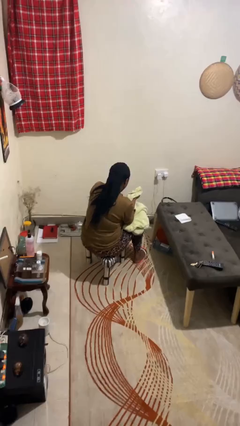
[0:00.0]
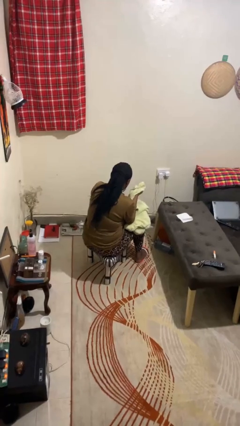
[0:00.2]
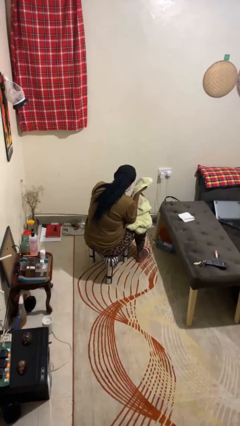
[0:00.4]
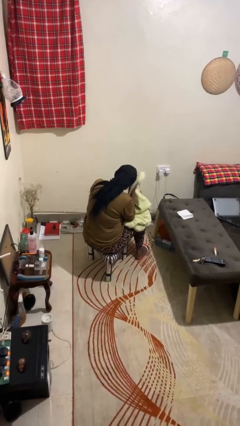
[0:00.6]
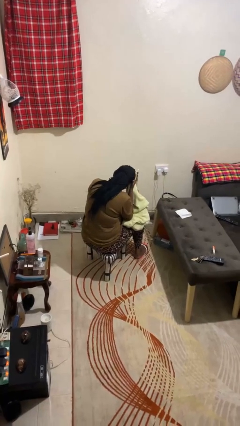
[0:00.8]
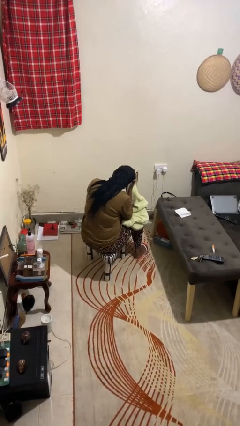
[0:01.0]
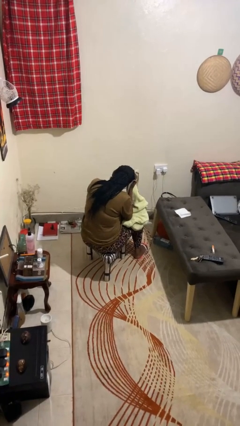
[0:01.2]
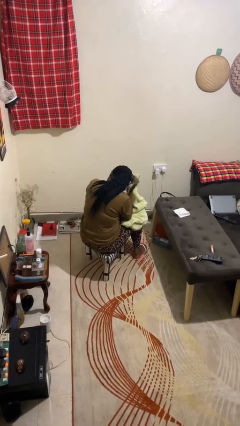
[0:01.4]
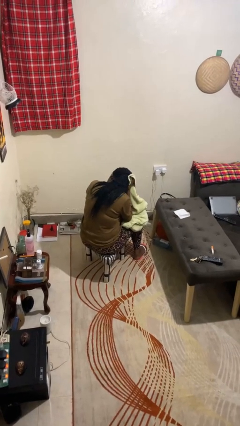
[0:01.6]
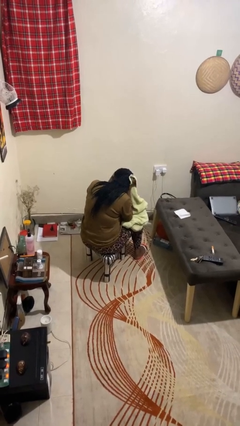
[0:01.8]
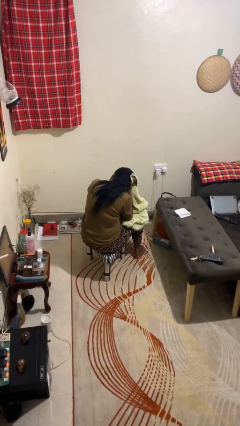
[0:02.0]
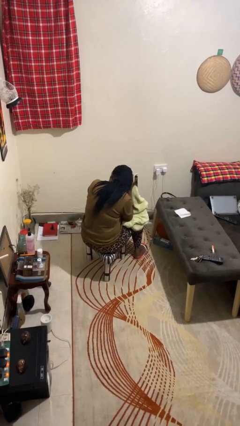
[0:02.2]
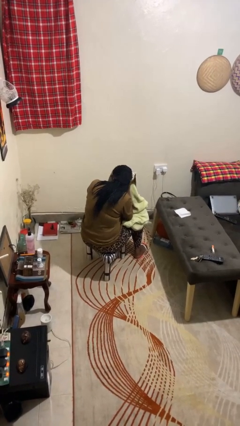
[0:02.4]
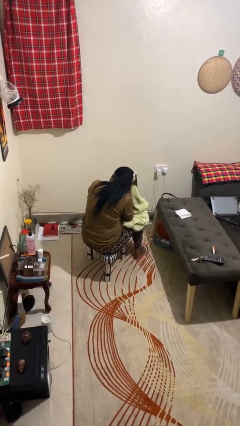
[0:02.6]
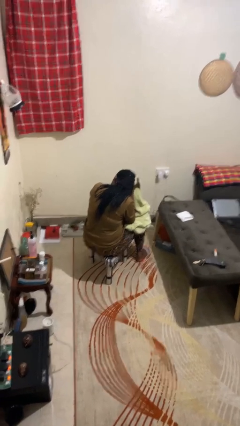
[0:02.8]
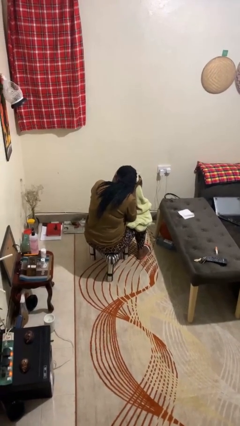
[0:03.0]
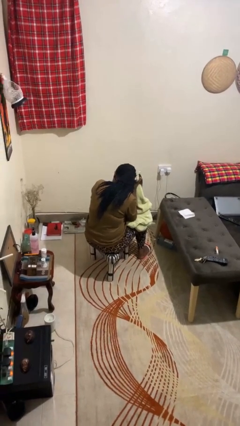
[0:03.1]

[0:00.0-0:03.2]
person dries hair with towel

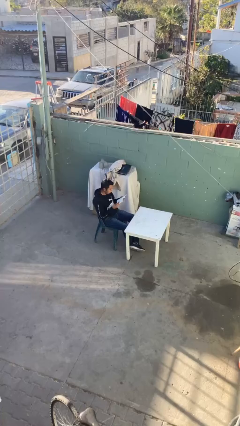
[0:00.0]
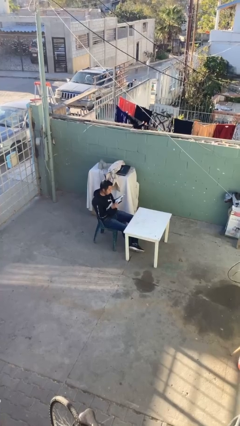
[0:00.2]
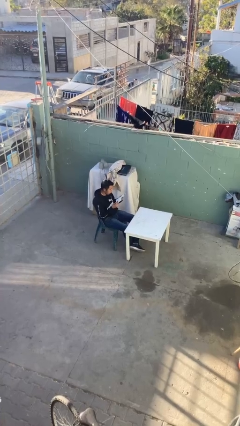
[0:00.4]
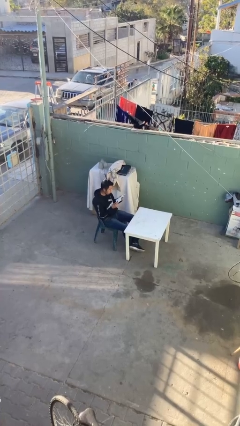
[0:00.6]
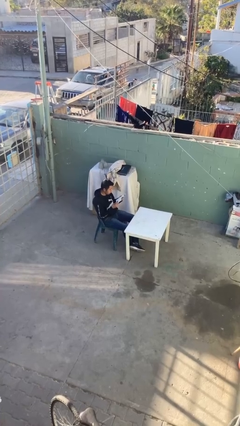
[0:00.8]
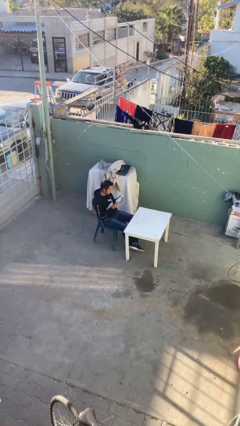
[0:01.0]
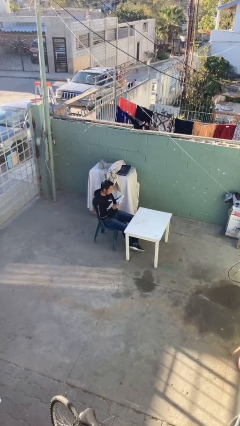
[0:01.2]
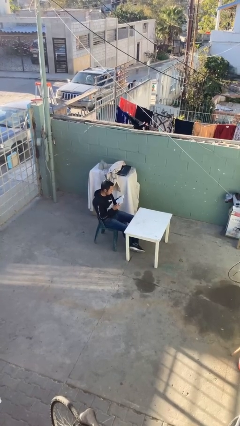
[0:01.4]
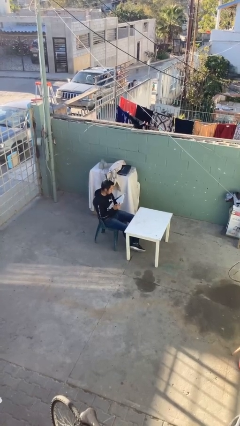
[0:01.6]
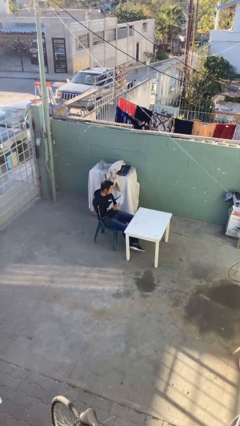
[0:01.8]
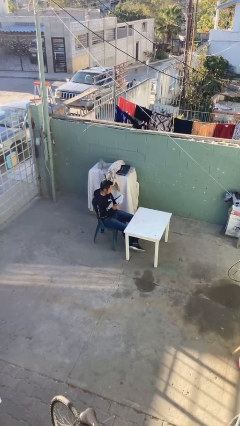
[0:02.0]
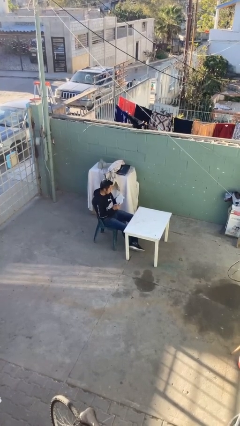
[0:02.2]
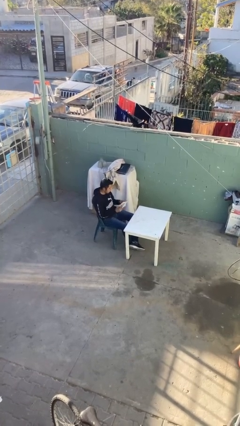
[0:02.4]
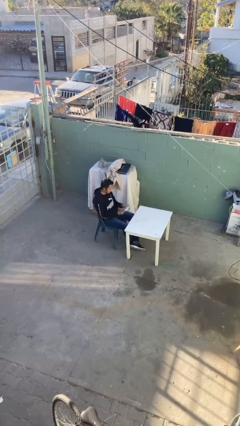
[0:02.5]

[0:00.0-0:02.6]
person reads document

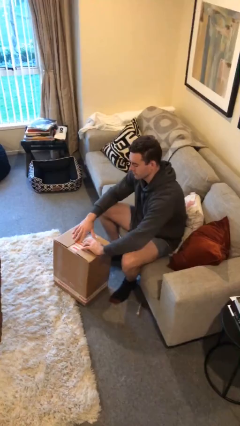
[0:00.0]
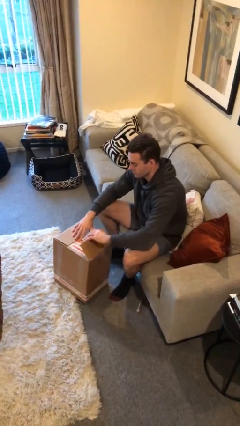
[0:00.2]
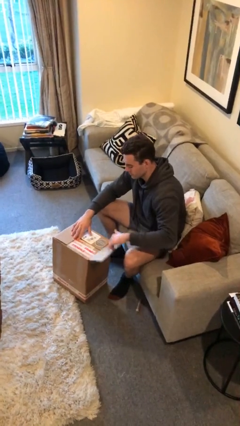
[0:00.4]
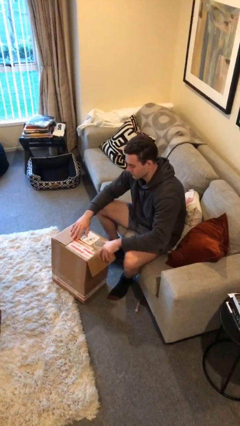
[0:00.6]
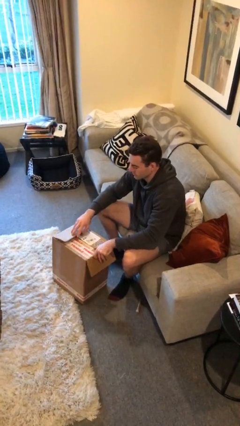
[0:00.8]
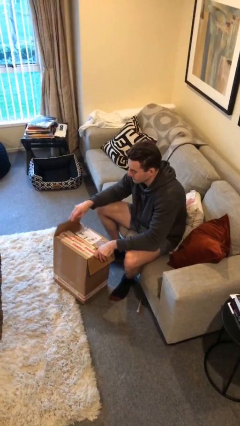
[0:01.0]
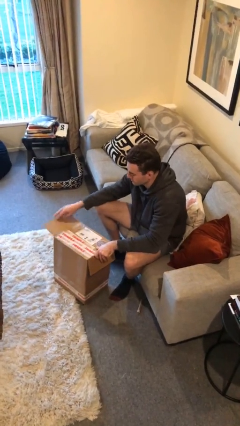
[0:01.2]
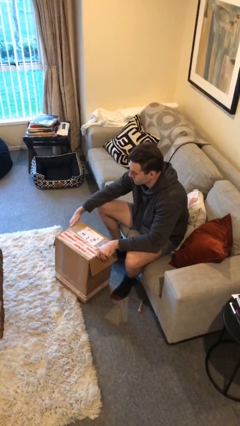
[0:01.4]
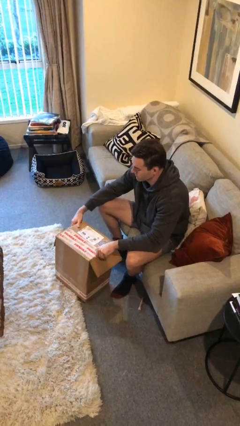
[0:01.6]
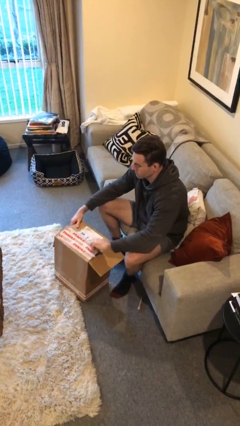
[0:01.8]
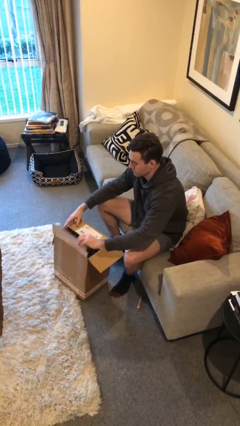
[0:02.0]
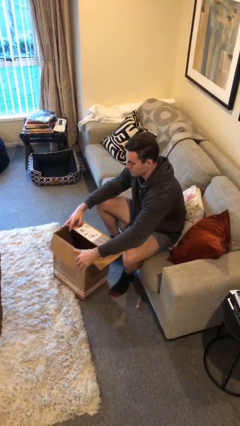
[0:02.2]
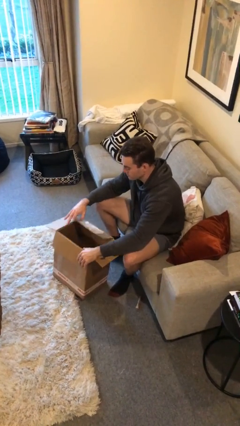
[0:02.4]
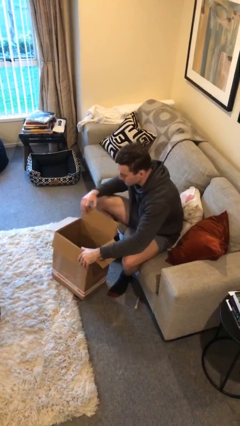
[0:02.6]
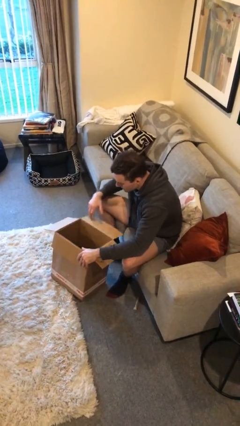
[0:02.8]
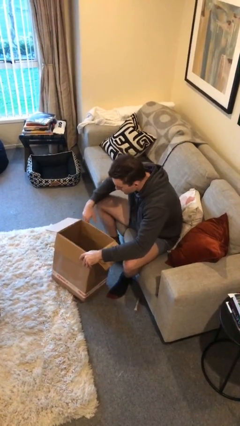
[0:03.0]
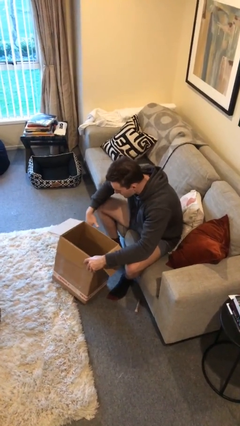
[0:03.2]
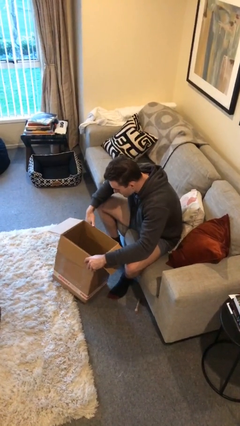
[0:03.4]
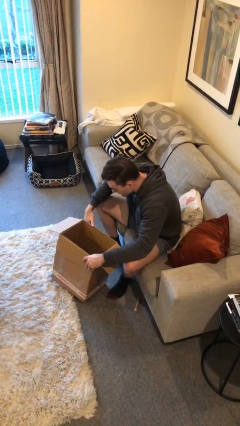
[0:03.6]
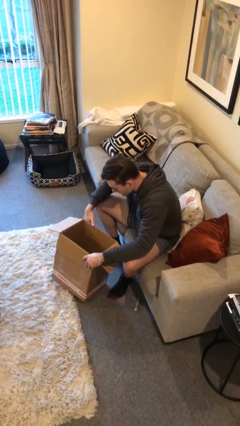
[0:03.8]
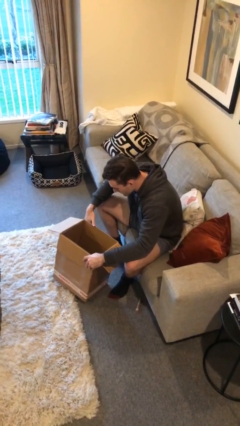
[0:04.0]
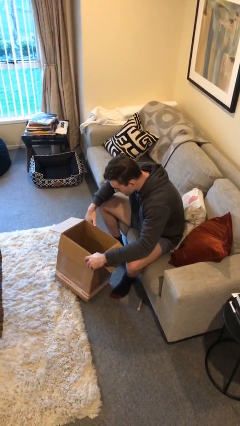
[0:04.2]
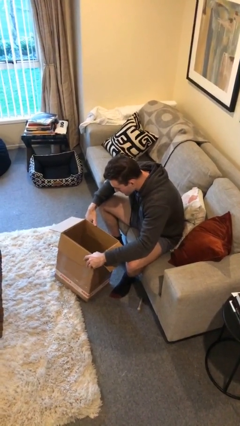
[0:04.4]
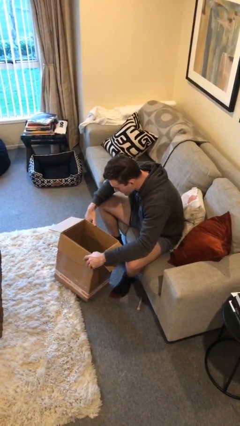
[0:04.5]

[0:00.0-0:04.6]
person opens box

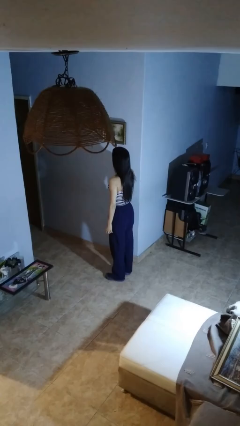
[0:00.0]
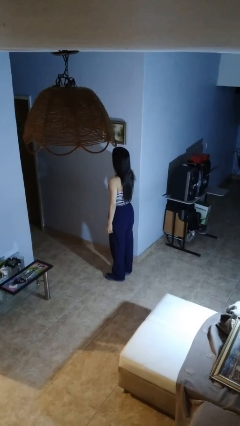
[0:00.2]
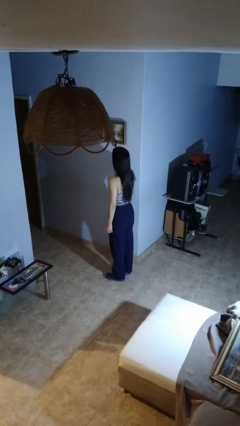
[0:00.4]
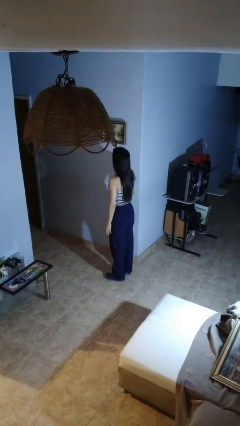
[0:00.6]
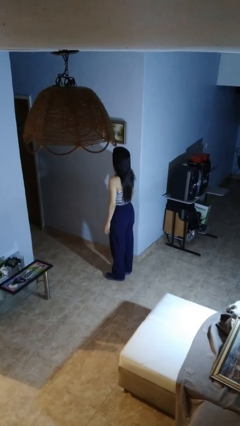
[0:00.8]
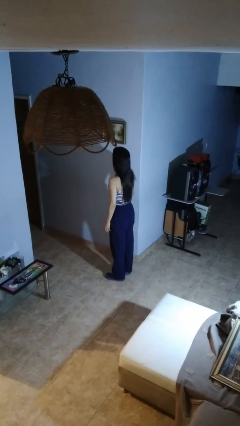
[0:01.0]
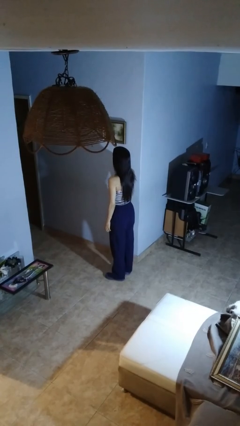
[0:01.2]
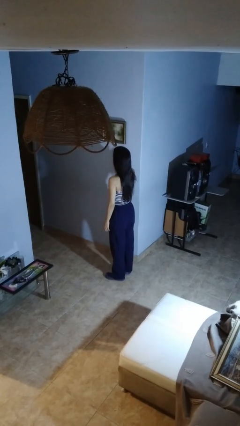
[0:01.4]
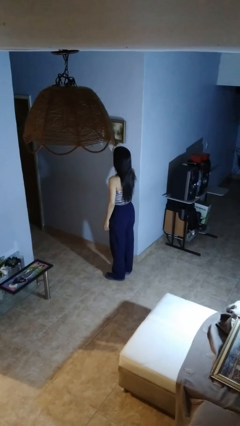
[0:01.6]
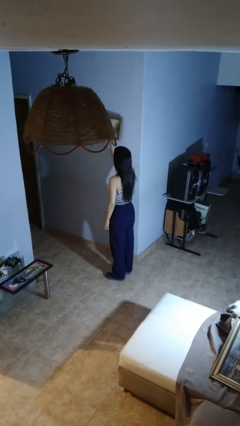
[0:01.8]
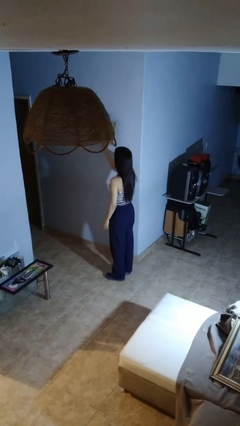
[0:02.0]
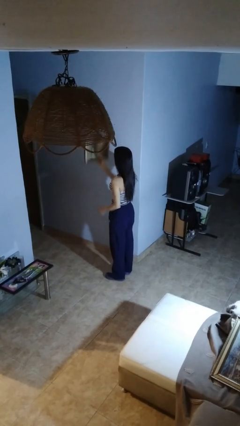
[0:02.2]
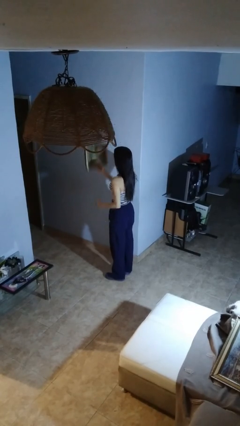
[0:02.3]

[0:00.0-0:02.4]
person takes down picture frame

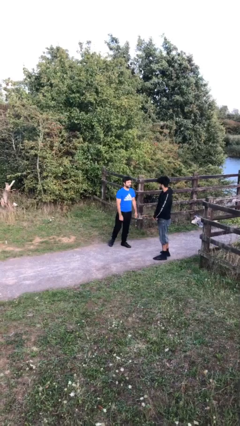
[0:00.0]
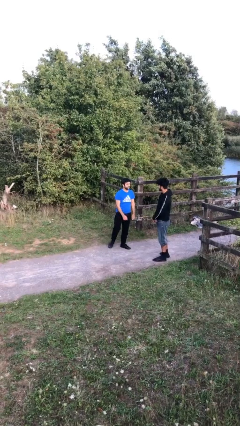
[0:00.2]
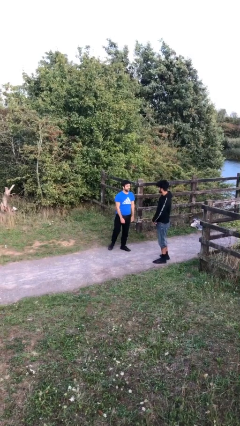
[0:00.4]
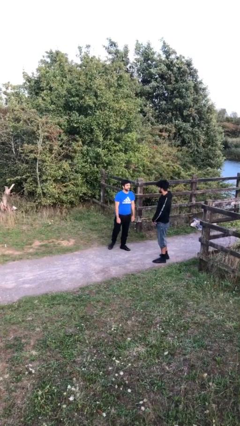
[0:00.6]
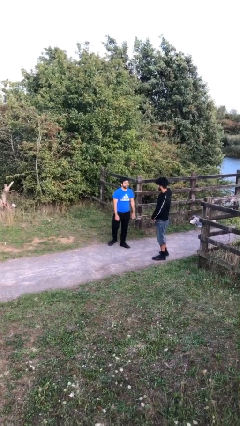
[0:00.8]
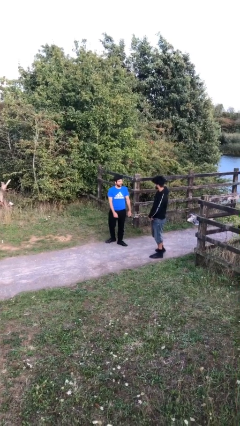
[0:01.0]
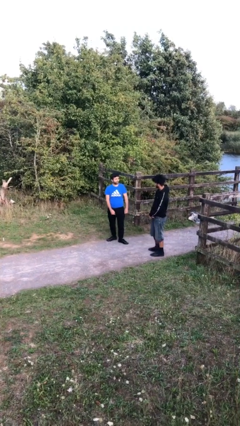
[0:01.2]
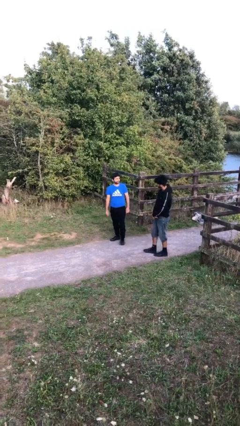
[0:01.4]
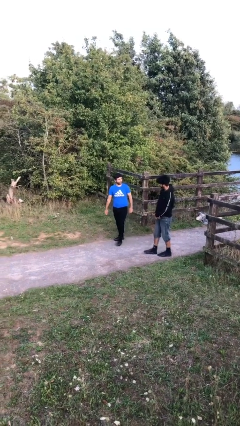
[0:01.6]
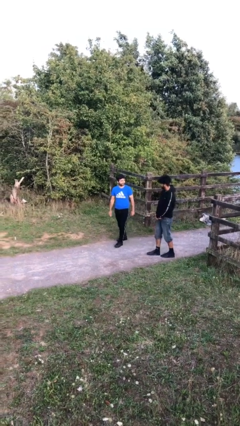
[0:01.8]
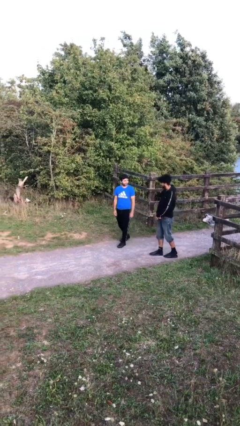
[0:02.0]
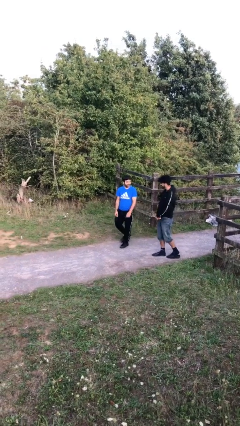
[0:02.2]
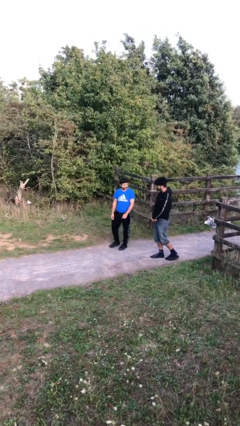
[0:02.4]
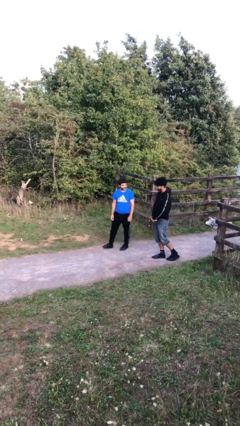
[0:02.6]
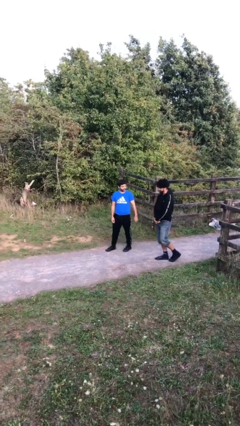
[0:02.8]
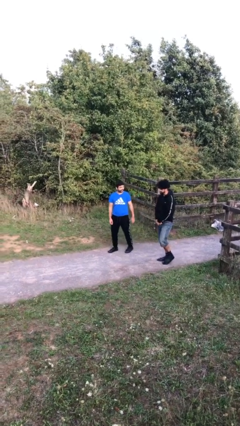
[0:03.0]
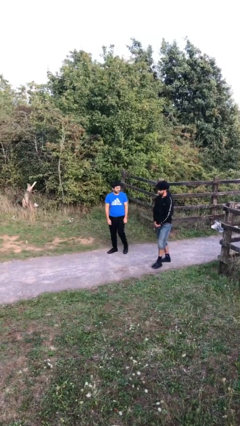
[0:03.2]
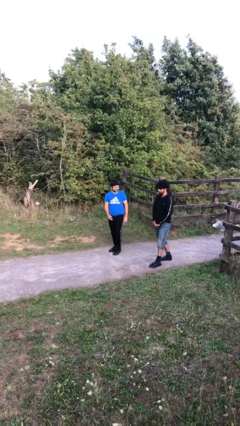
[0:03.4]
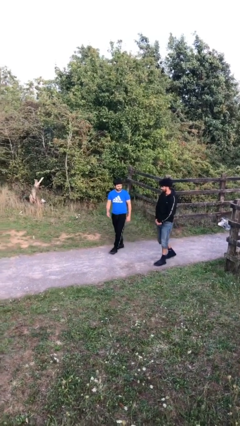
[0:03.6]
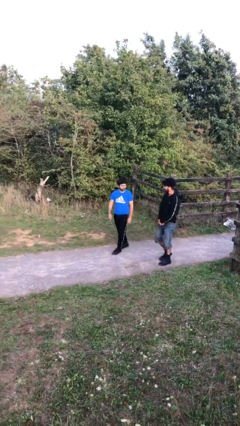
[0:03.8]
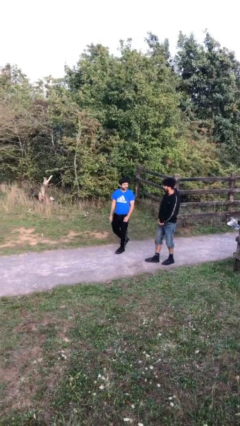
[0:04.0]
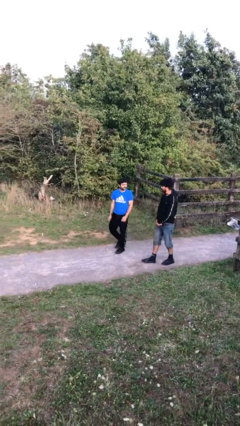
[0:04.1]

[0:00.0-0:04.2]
person talks to person

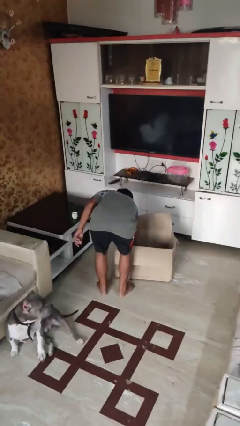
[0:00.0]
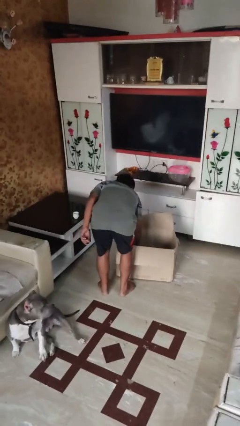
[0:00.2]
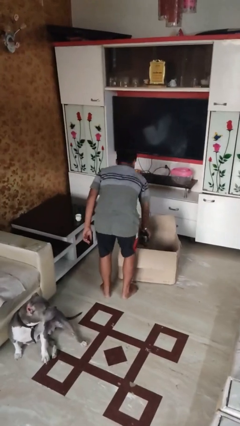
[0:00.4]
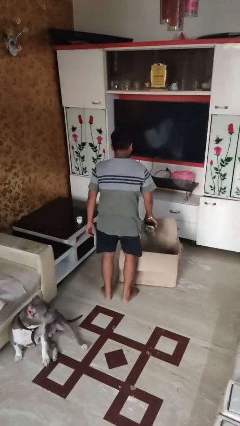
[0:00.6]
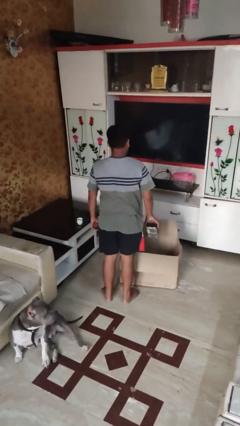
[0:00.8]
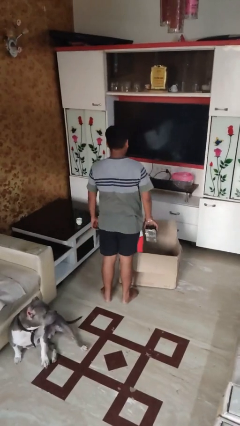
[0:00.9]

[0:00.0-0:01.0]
person takes object from box
